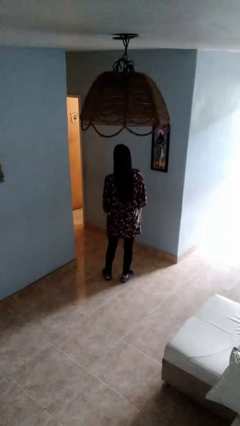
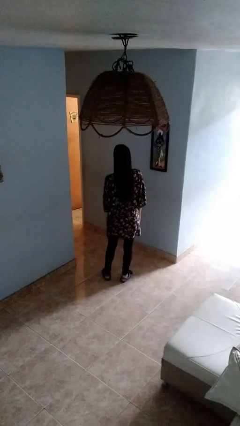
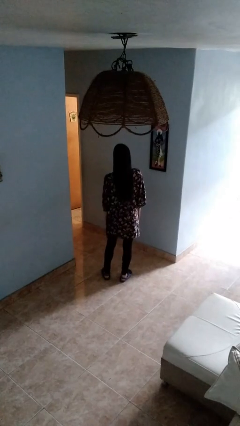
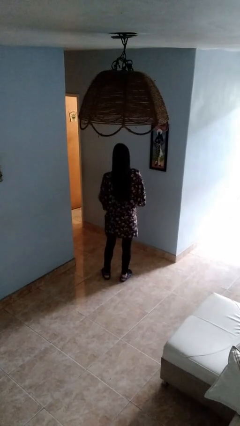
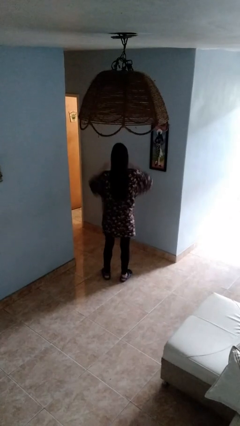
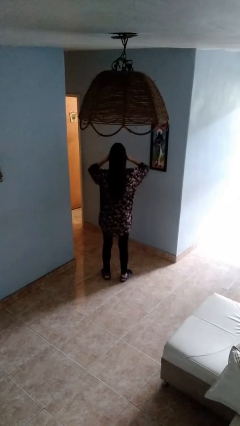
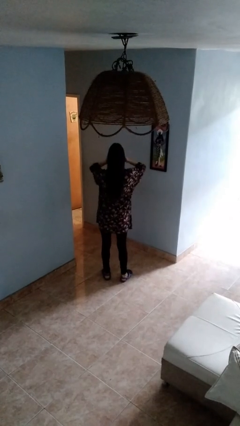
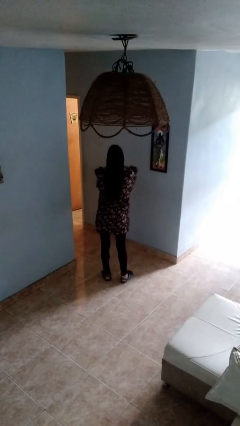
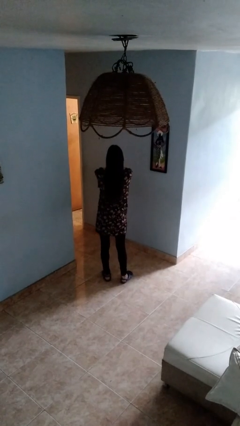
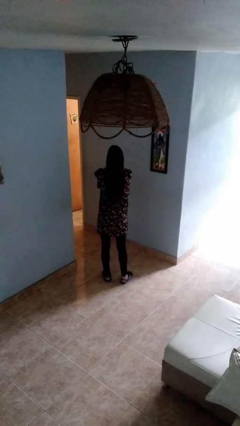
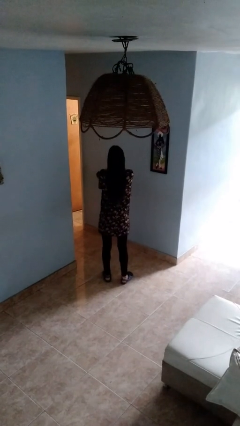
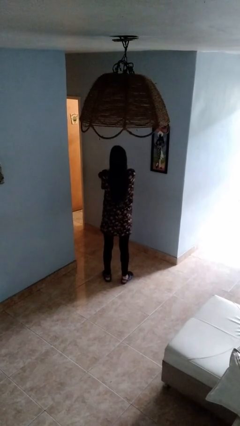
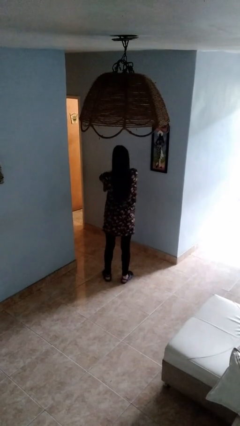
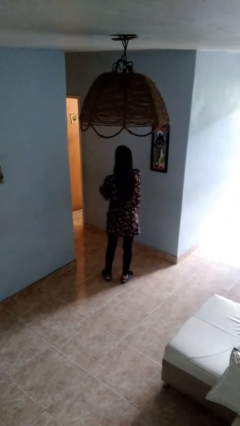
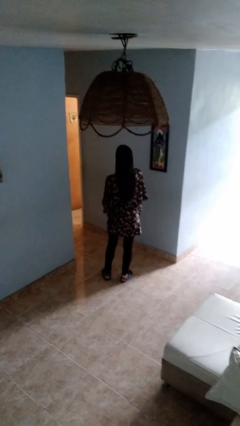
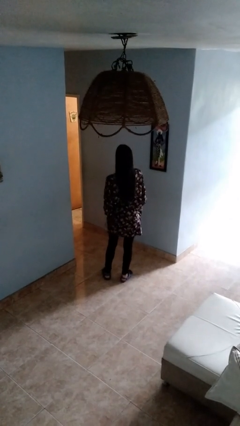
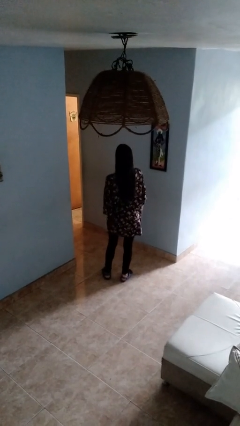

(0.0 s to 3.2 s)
person rubs eyes

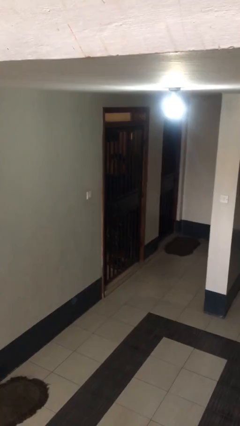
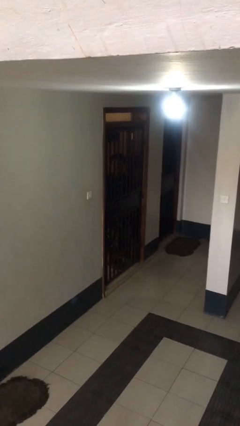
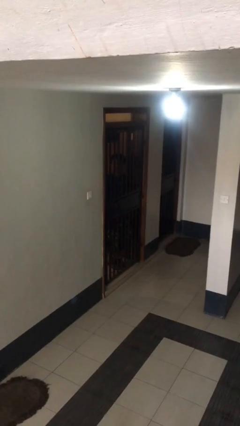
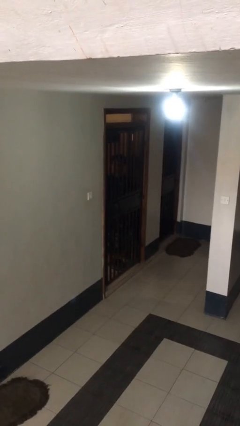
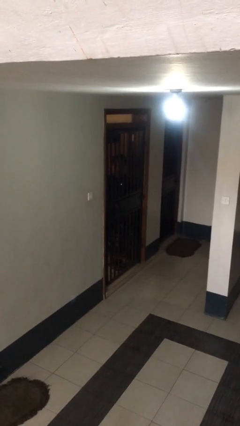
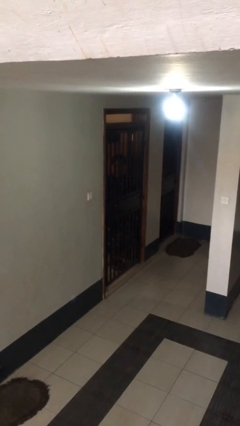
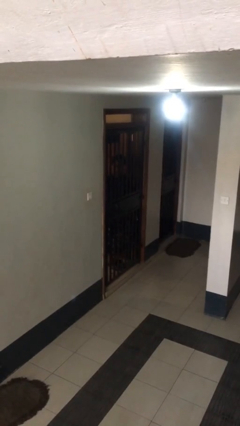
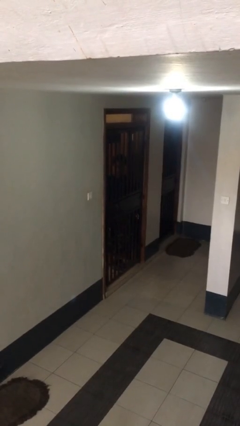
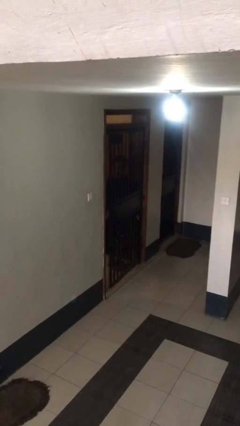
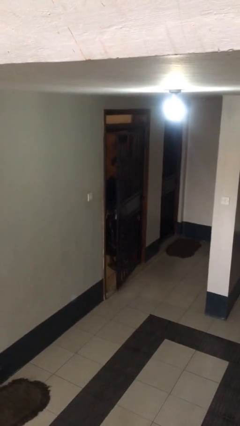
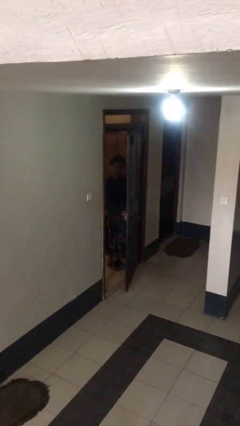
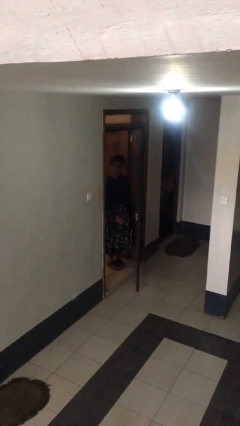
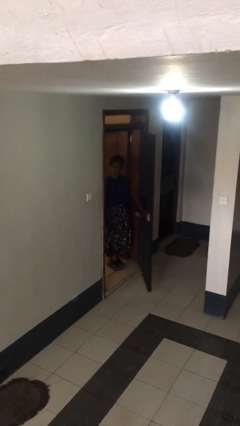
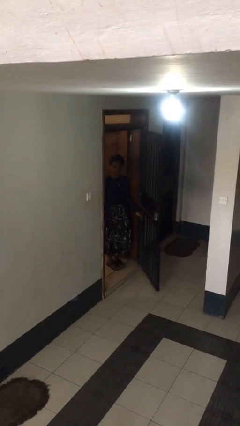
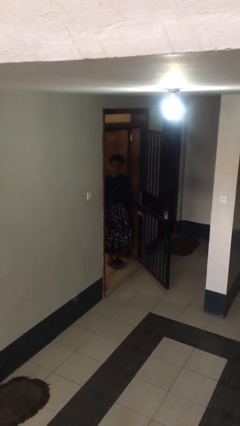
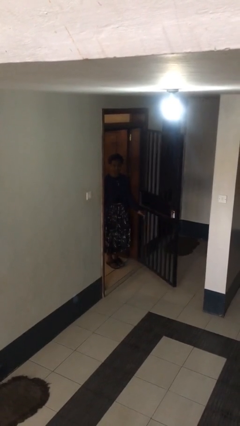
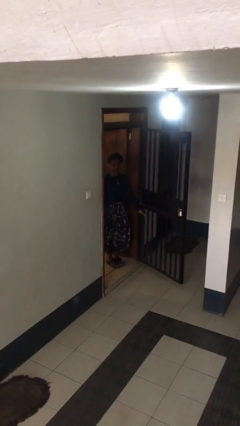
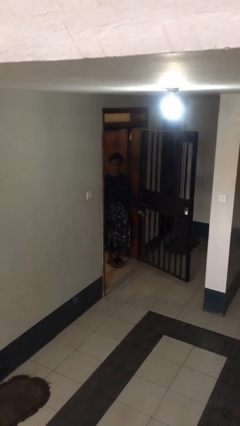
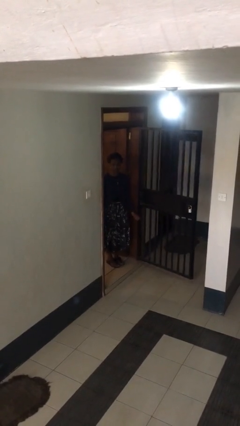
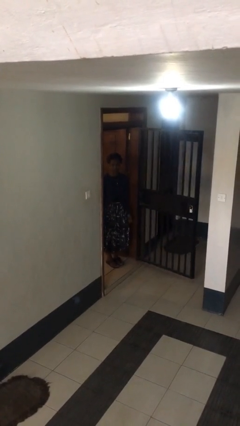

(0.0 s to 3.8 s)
person opens facility door

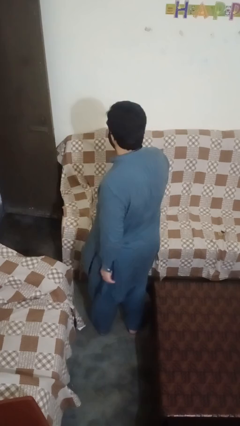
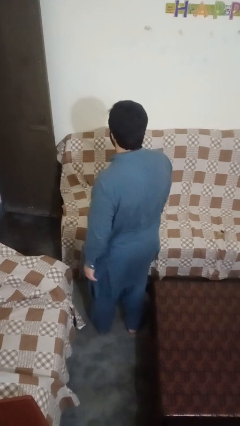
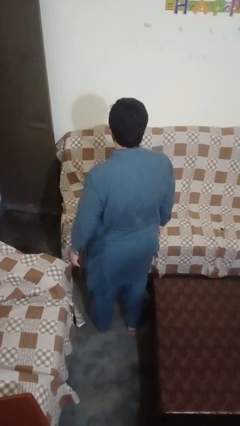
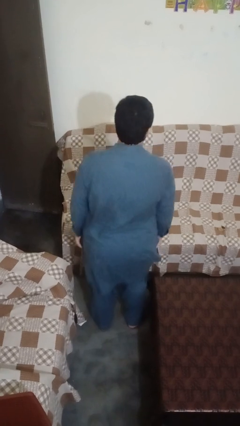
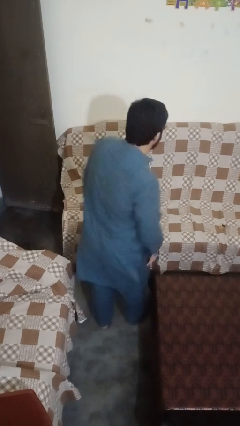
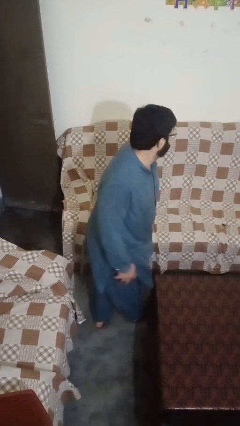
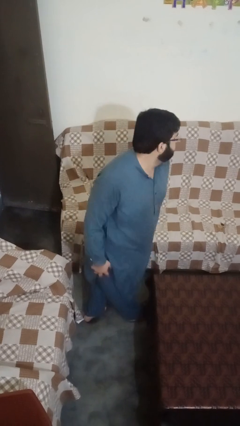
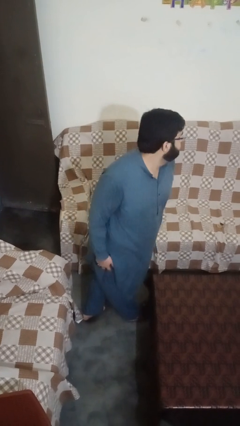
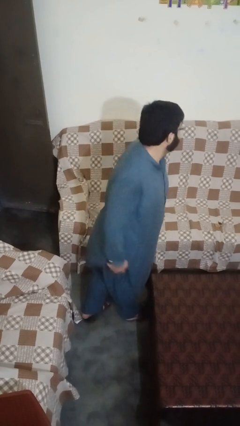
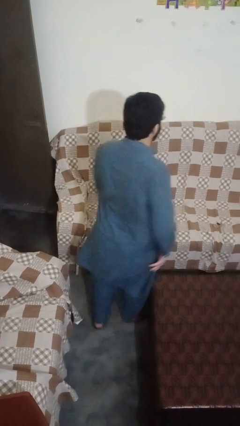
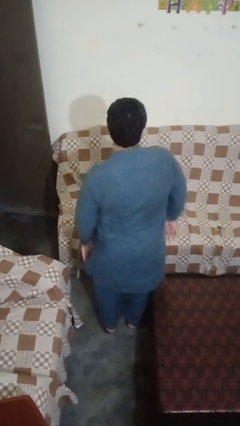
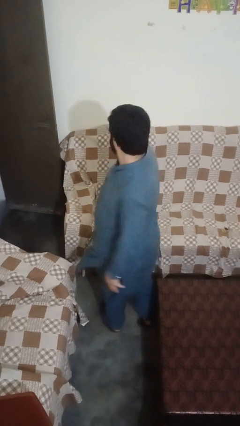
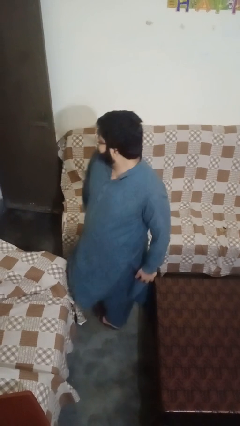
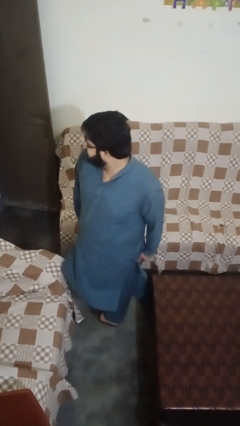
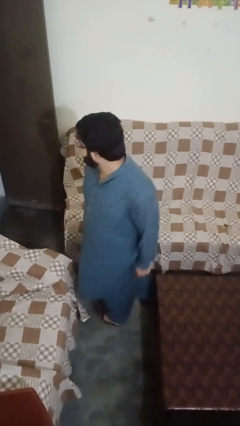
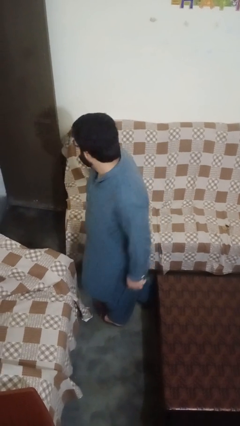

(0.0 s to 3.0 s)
person twirls

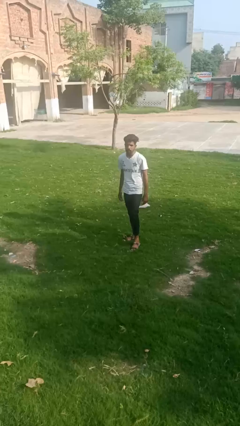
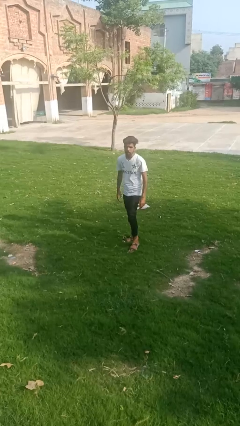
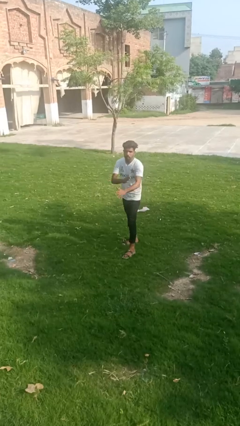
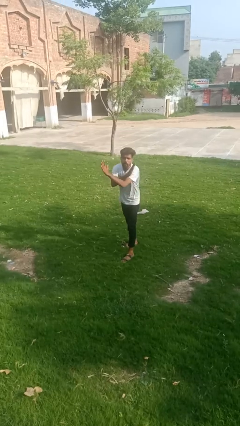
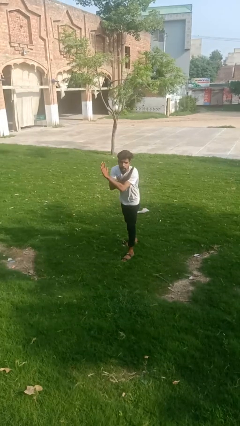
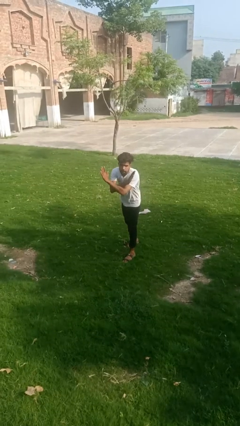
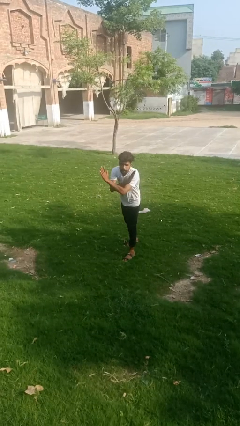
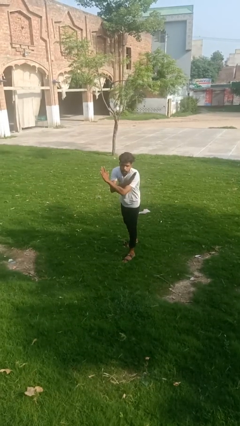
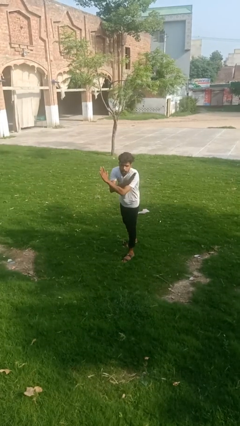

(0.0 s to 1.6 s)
person crosses arms

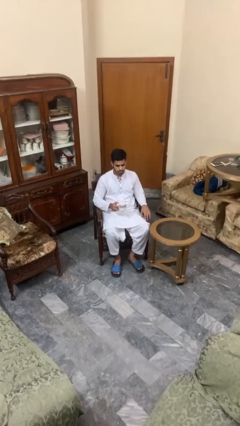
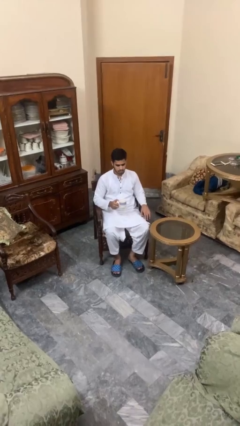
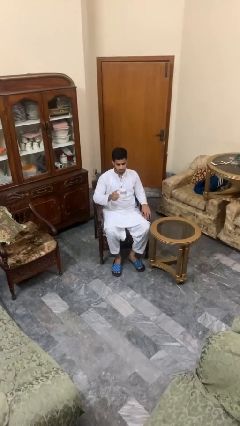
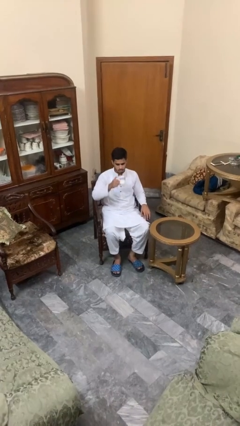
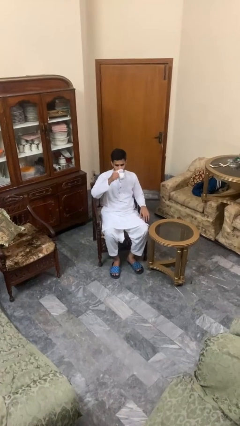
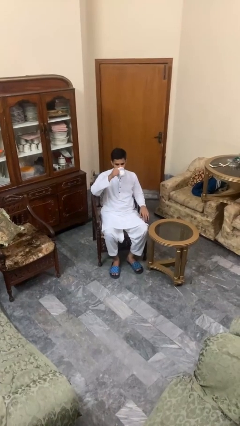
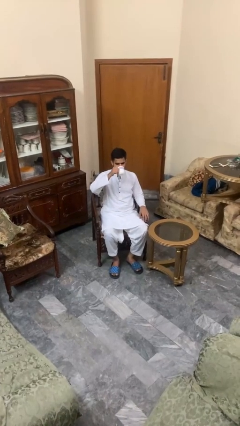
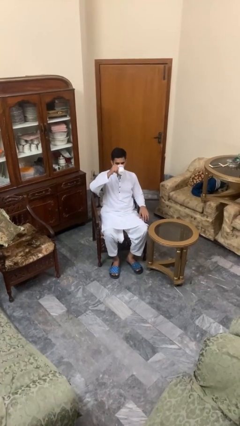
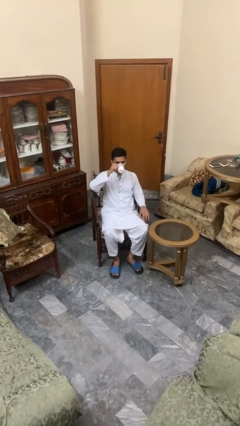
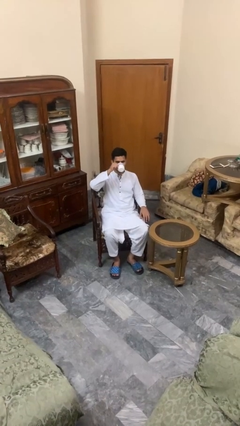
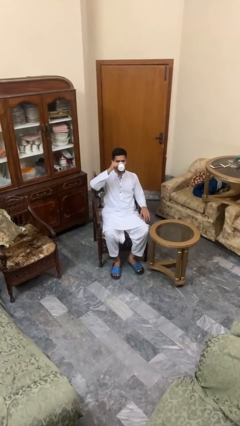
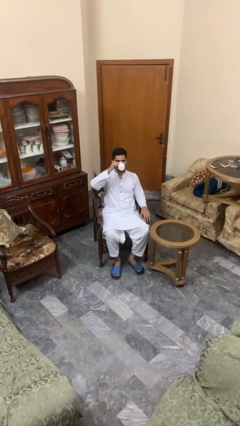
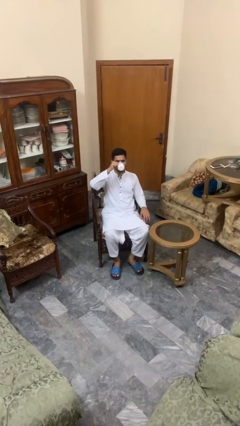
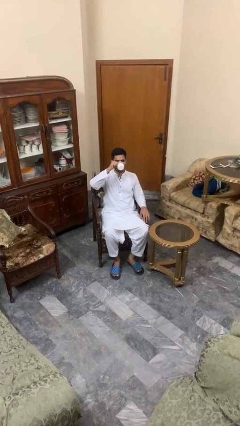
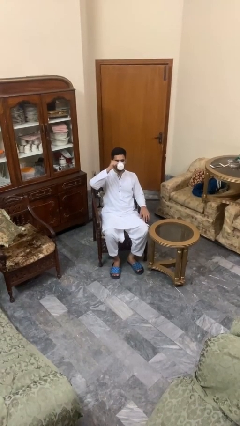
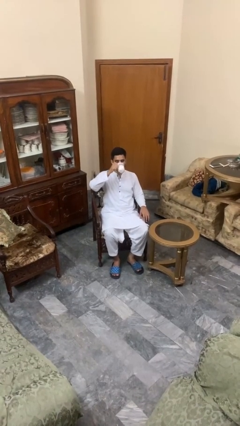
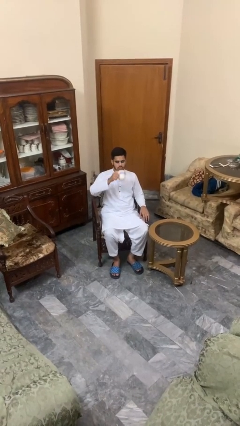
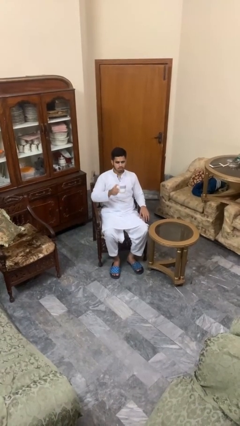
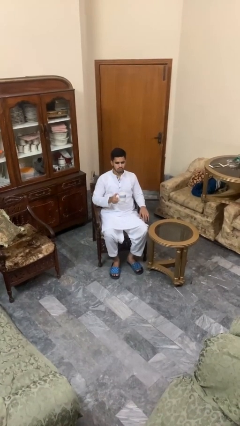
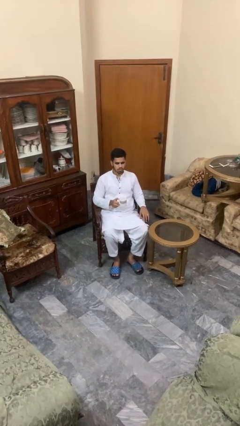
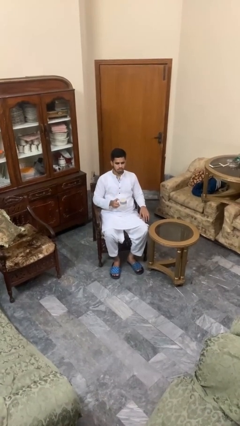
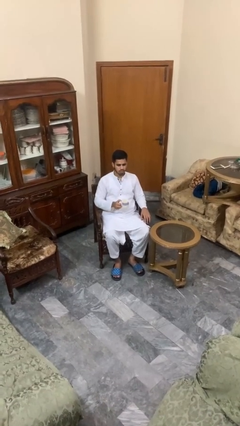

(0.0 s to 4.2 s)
person drinks from mug

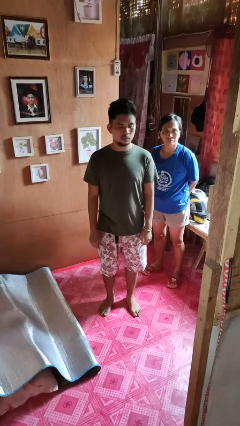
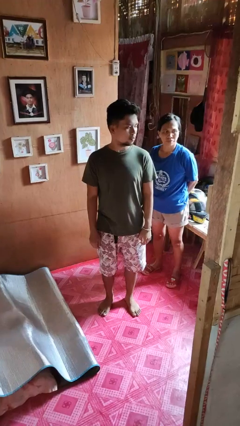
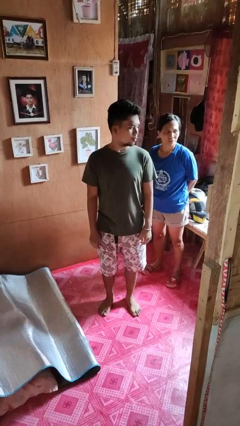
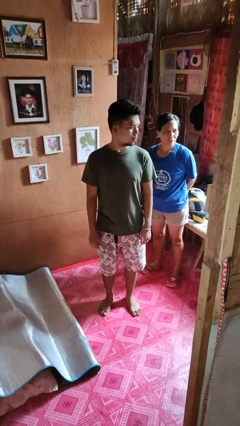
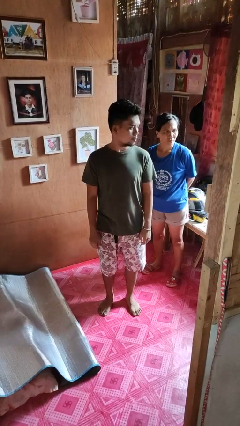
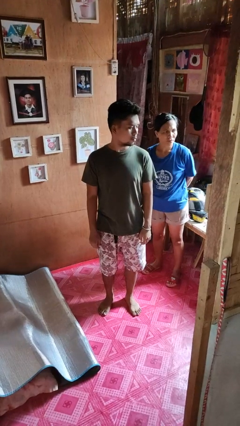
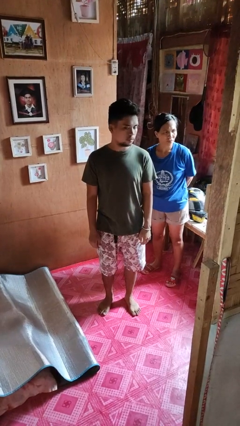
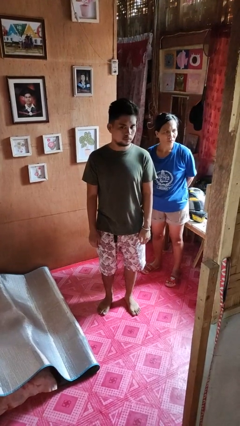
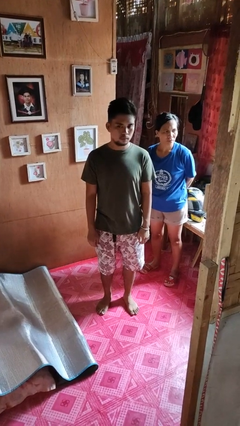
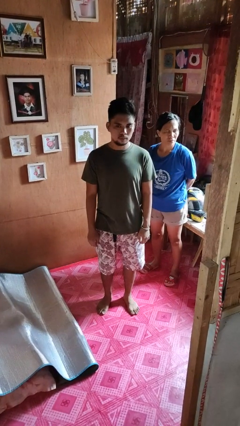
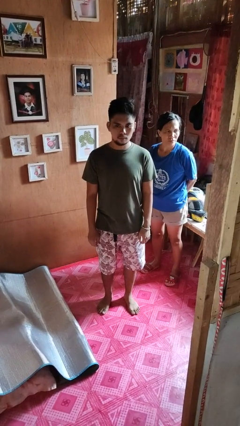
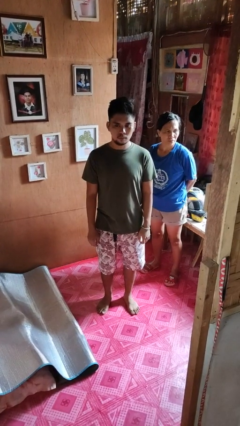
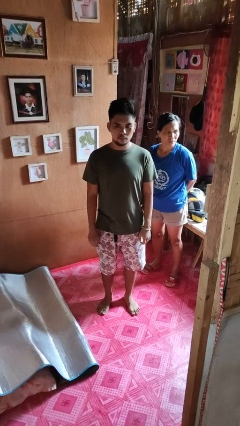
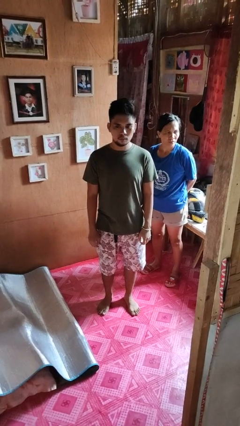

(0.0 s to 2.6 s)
person looks over shoulder
